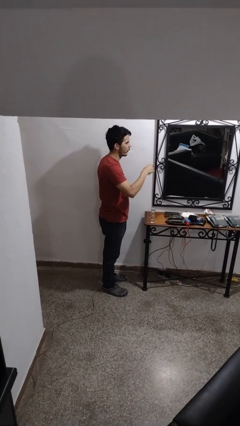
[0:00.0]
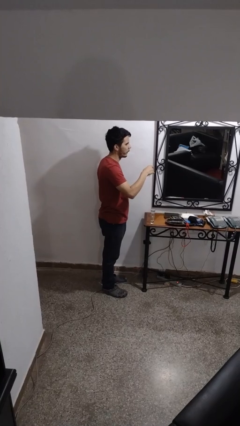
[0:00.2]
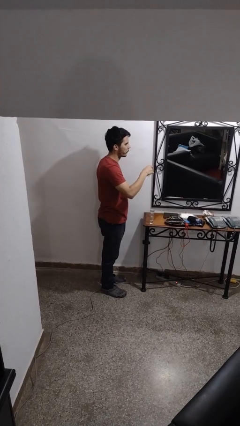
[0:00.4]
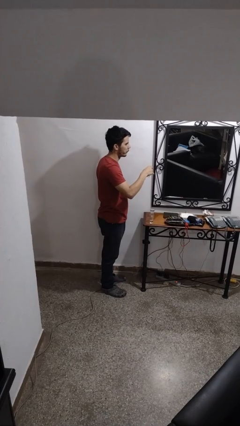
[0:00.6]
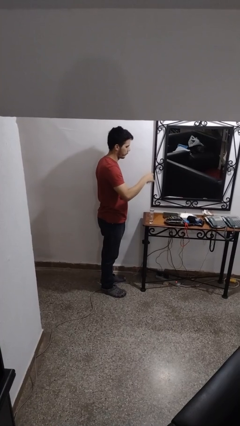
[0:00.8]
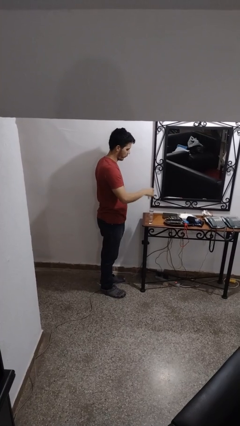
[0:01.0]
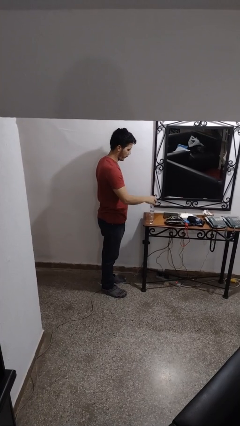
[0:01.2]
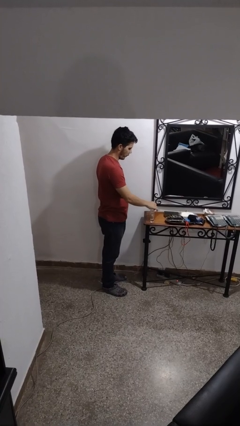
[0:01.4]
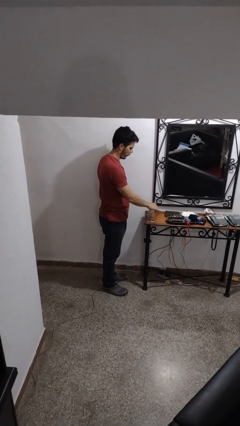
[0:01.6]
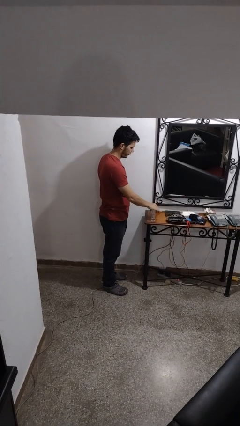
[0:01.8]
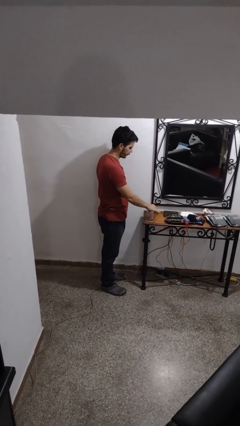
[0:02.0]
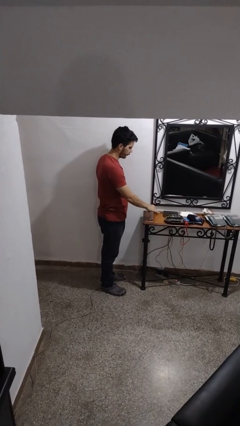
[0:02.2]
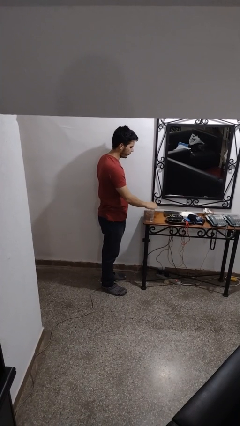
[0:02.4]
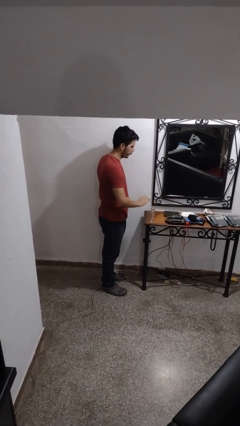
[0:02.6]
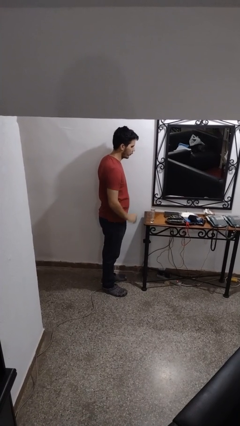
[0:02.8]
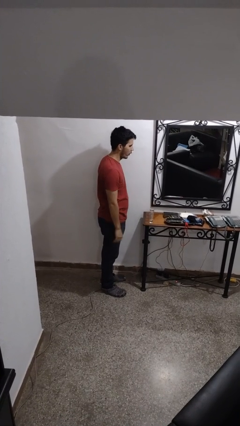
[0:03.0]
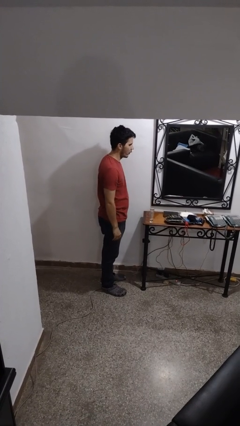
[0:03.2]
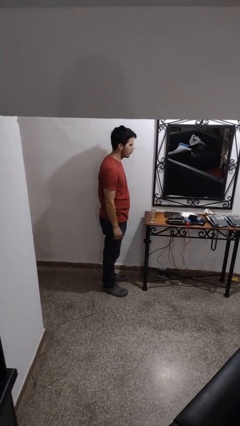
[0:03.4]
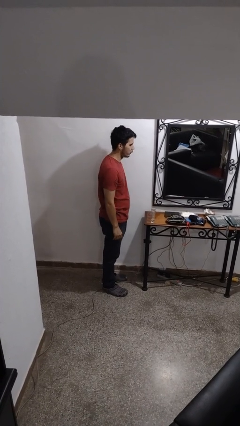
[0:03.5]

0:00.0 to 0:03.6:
person puts down object on table

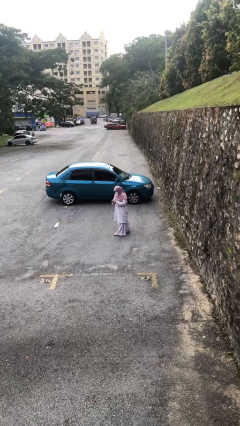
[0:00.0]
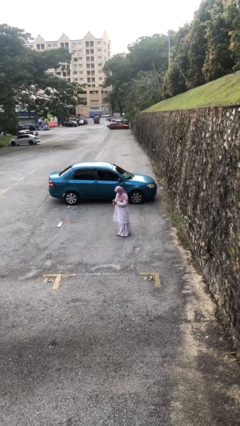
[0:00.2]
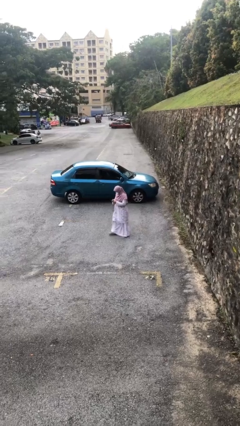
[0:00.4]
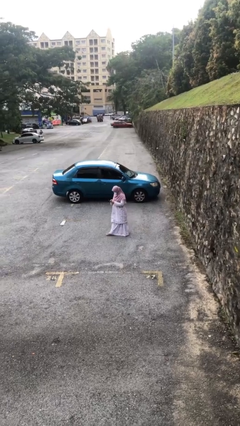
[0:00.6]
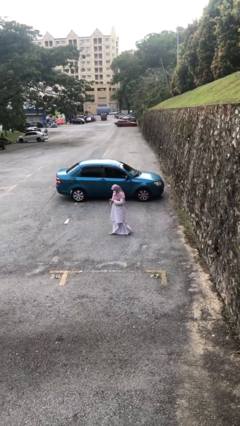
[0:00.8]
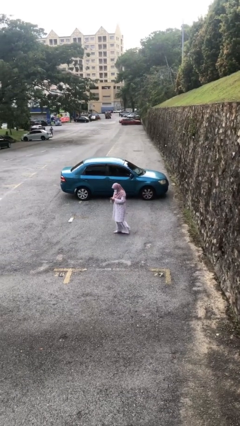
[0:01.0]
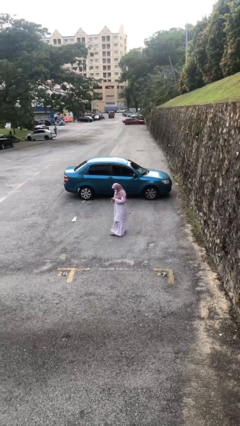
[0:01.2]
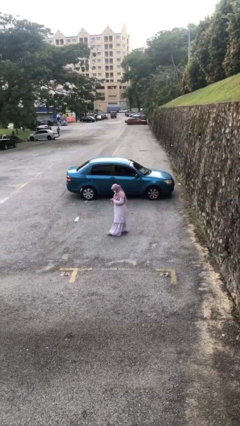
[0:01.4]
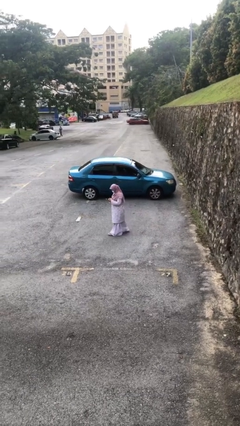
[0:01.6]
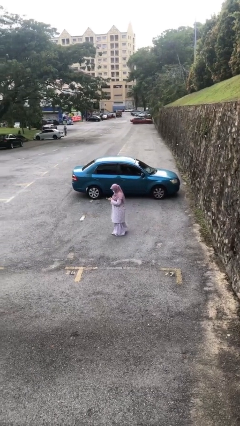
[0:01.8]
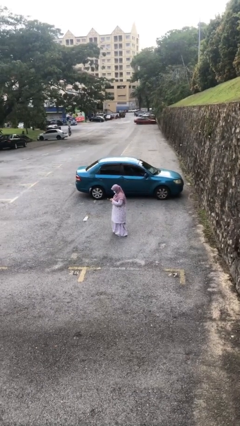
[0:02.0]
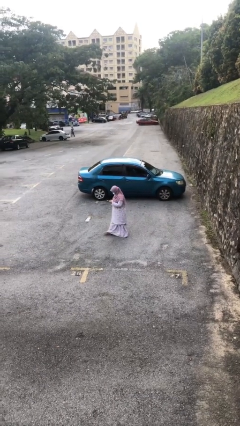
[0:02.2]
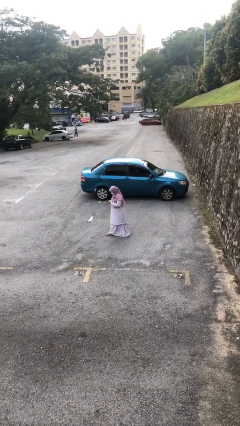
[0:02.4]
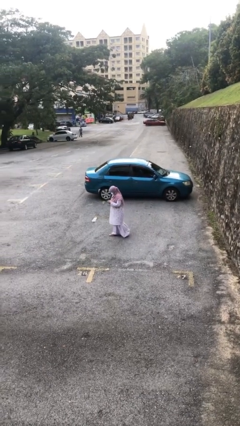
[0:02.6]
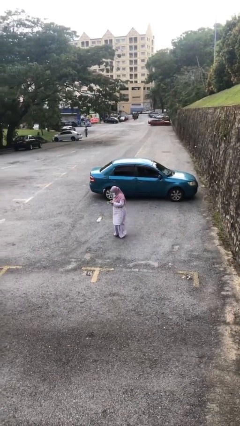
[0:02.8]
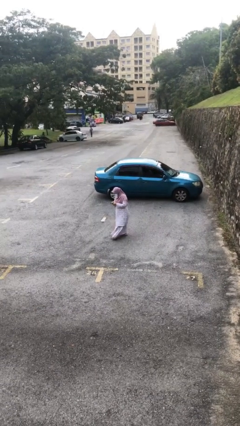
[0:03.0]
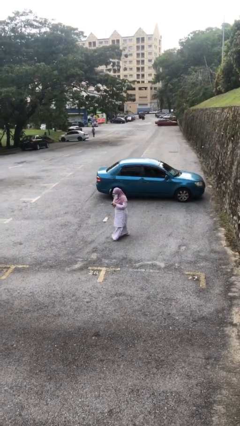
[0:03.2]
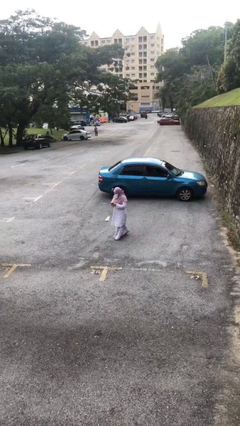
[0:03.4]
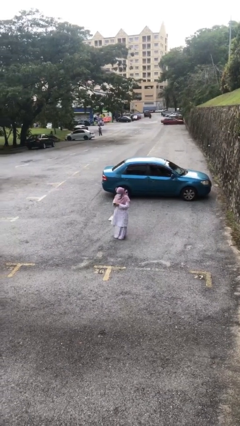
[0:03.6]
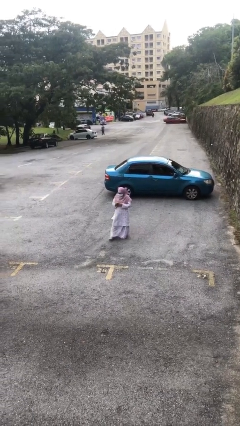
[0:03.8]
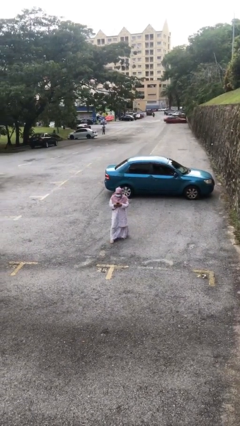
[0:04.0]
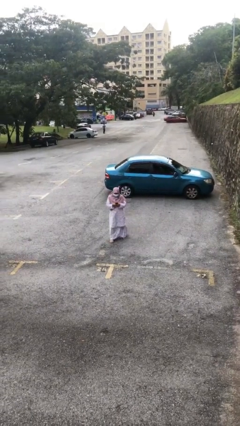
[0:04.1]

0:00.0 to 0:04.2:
person texts on phone

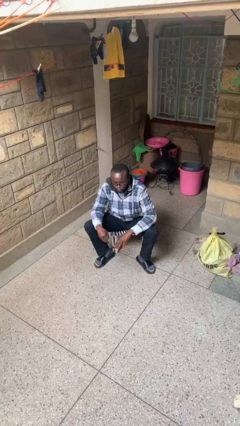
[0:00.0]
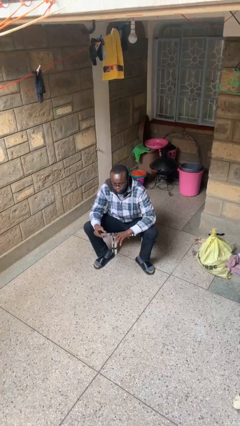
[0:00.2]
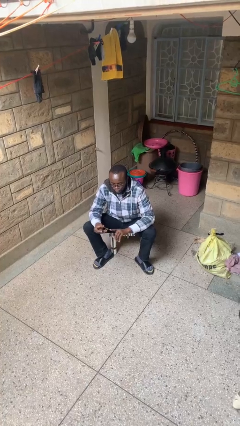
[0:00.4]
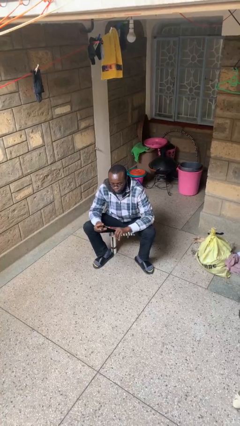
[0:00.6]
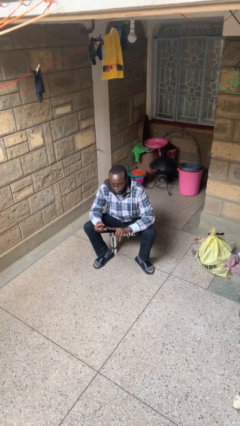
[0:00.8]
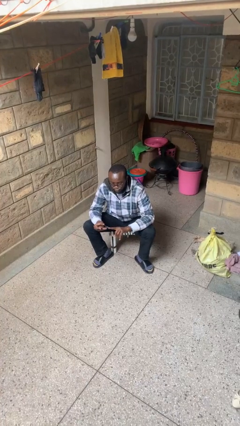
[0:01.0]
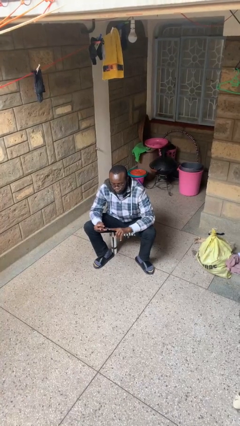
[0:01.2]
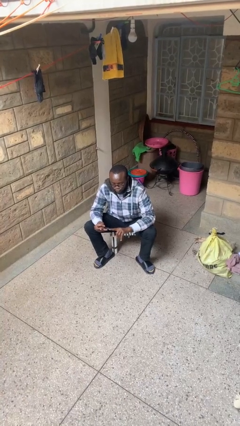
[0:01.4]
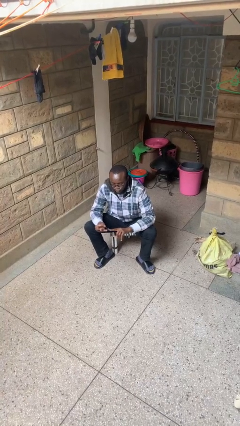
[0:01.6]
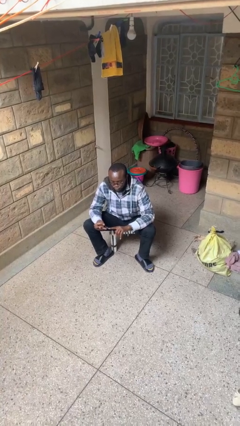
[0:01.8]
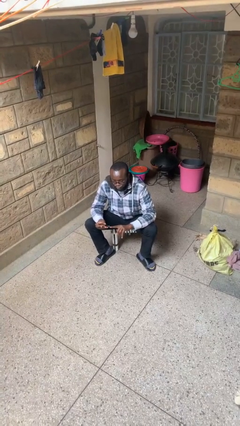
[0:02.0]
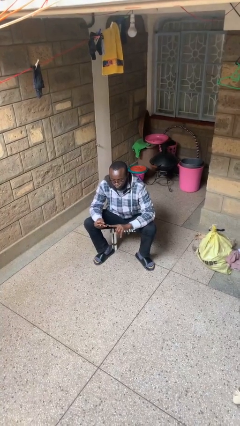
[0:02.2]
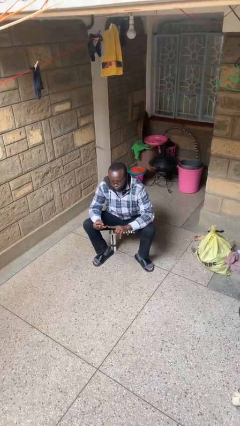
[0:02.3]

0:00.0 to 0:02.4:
person clips fingernails

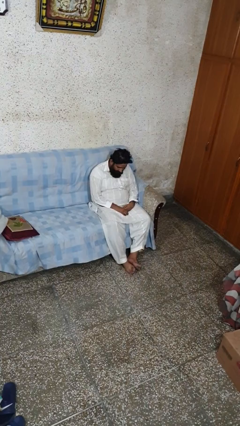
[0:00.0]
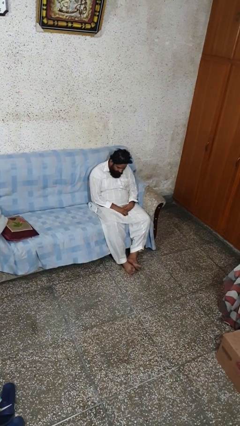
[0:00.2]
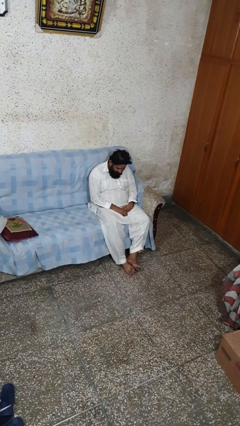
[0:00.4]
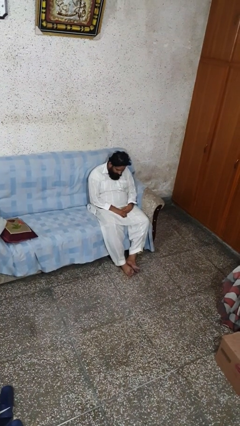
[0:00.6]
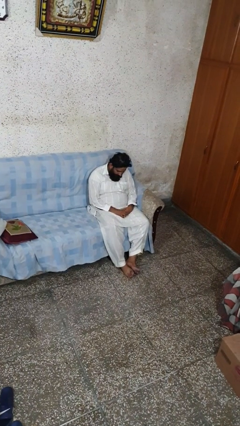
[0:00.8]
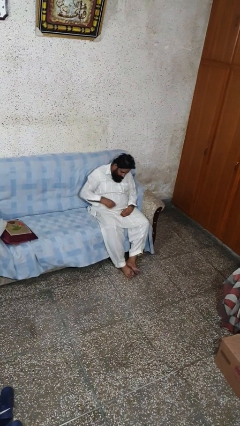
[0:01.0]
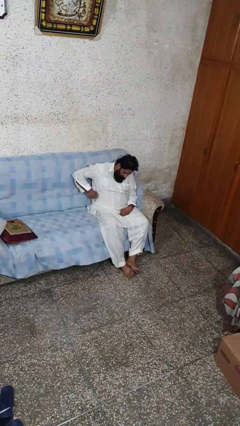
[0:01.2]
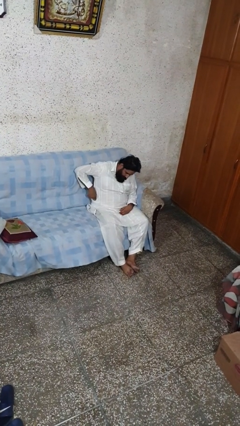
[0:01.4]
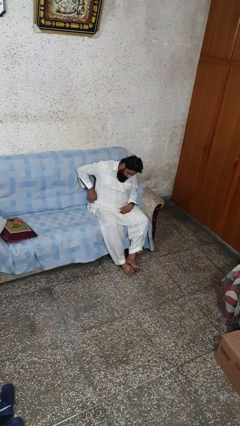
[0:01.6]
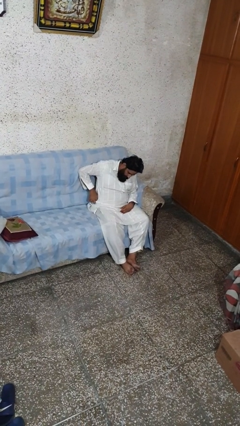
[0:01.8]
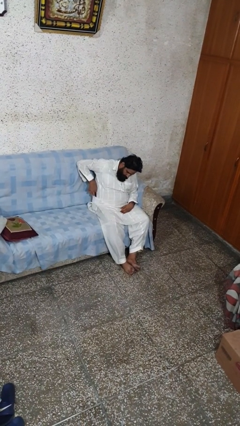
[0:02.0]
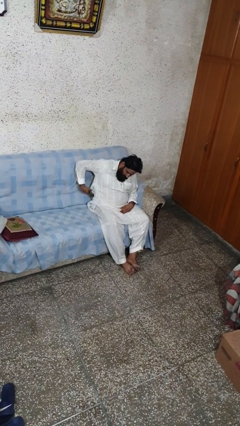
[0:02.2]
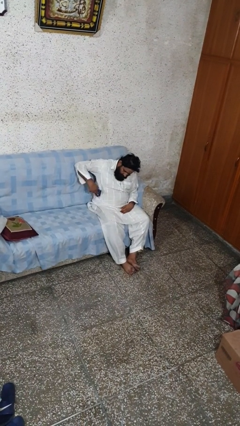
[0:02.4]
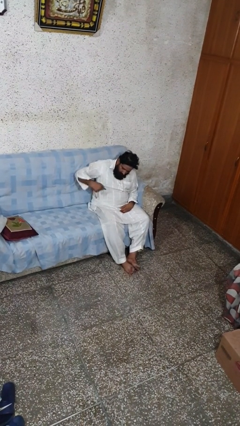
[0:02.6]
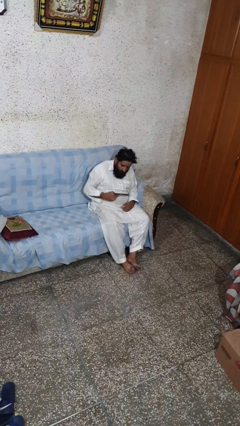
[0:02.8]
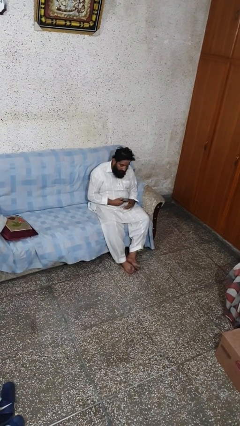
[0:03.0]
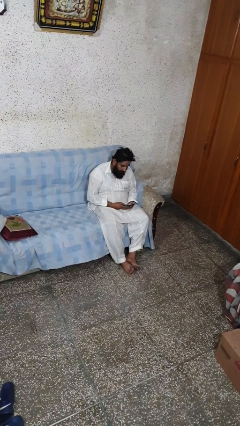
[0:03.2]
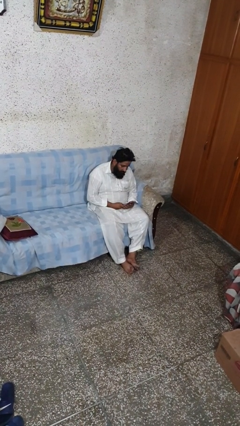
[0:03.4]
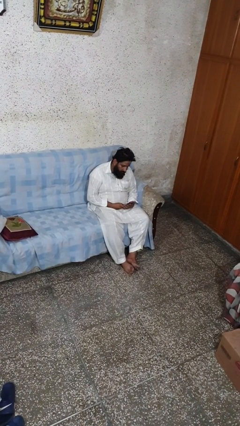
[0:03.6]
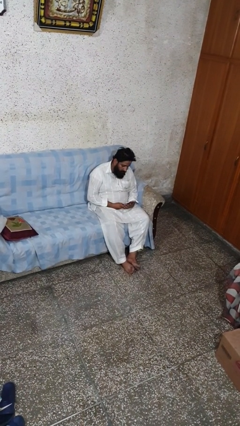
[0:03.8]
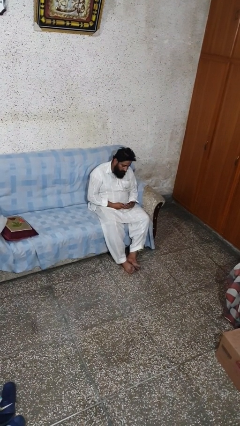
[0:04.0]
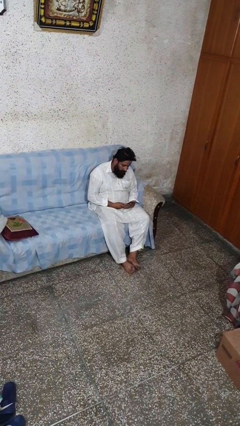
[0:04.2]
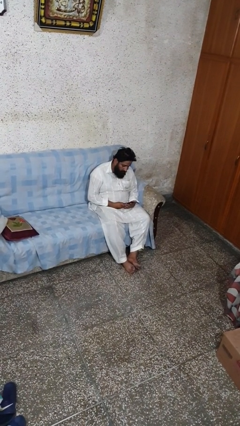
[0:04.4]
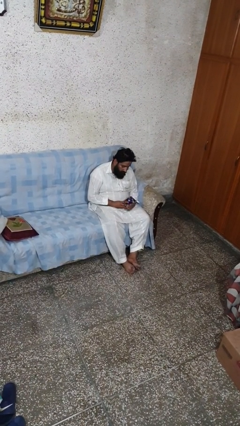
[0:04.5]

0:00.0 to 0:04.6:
person takes phone from pocket

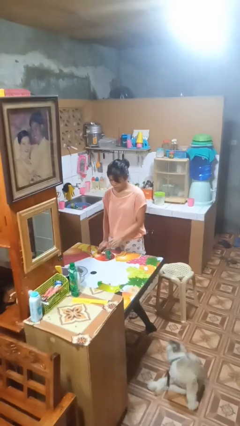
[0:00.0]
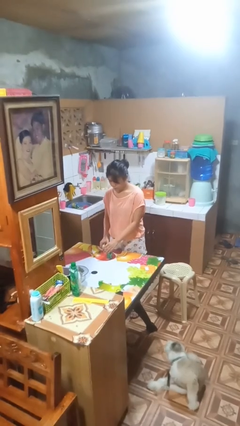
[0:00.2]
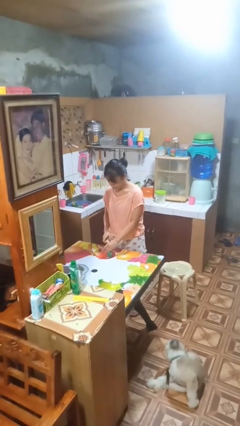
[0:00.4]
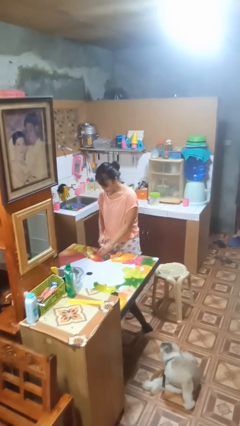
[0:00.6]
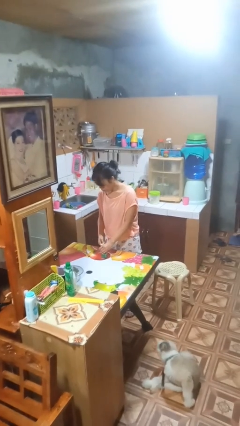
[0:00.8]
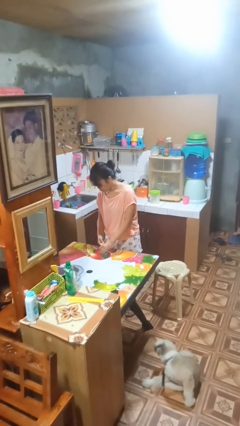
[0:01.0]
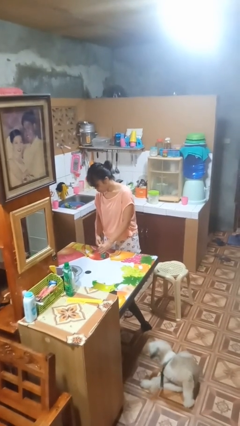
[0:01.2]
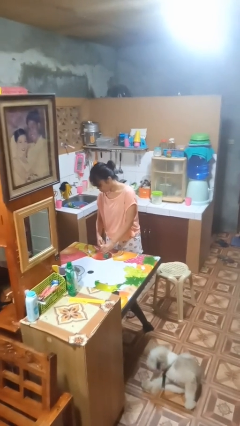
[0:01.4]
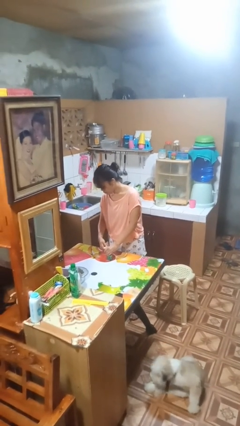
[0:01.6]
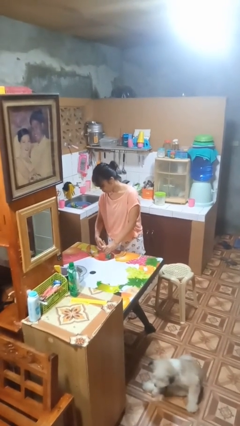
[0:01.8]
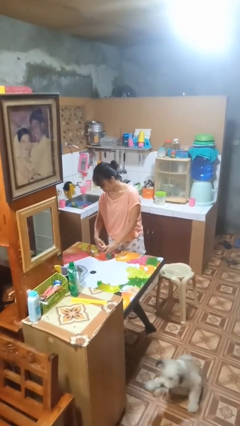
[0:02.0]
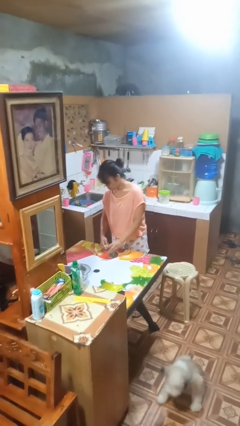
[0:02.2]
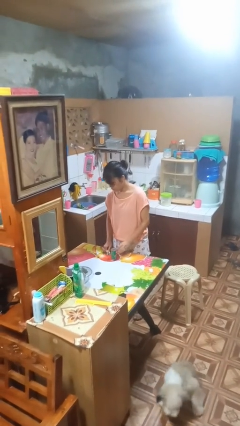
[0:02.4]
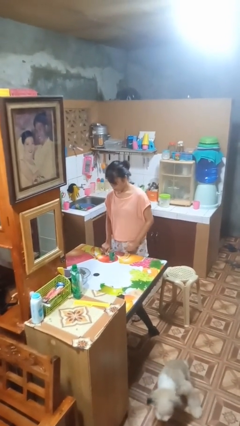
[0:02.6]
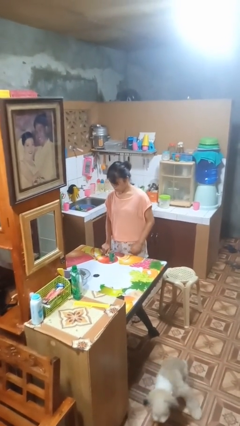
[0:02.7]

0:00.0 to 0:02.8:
person opens can with can opener

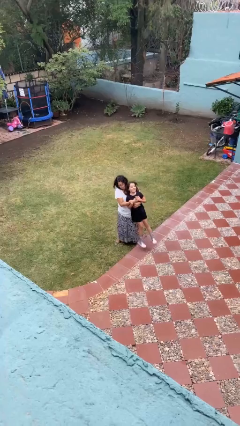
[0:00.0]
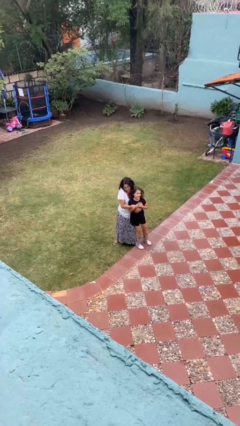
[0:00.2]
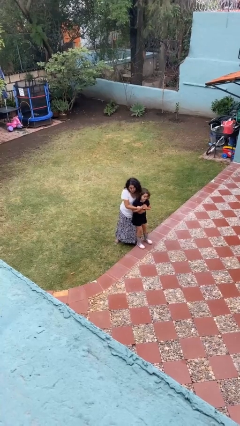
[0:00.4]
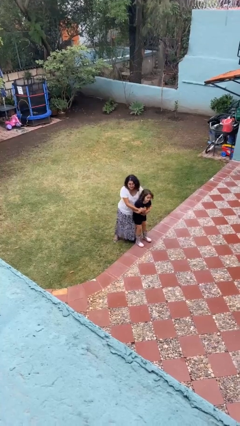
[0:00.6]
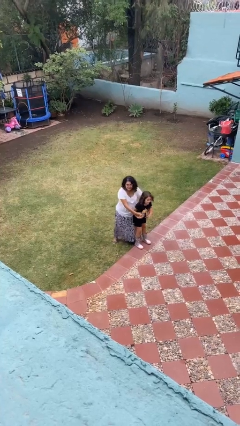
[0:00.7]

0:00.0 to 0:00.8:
person puts down person
